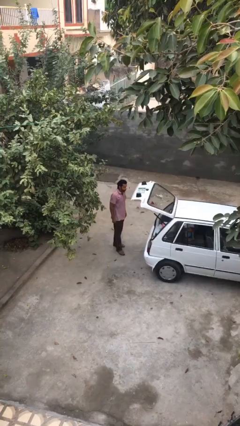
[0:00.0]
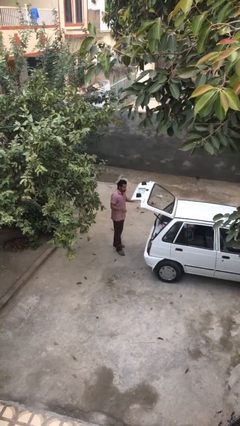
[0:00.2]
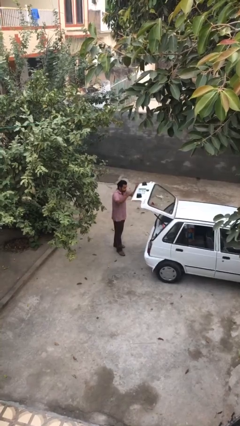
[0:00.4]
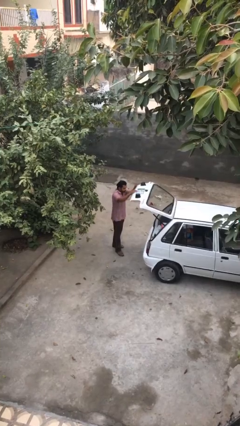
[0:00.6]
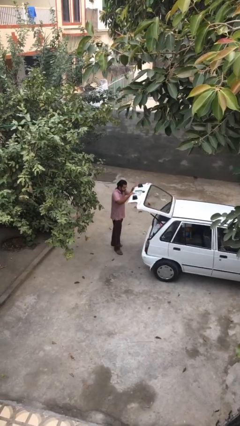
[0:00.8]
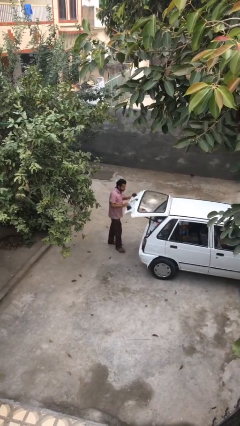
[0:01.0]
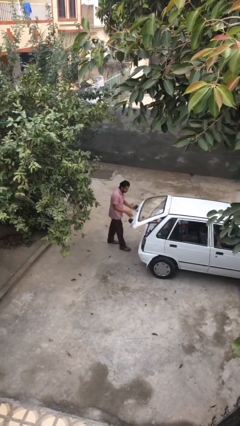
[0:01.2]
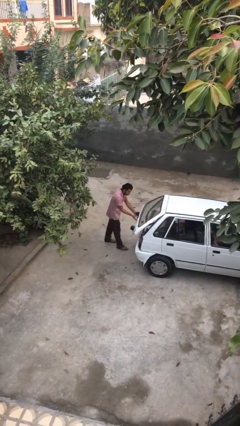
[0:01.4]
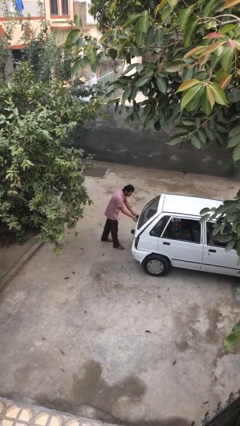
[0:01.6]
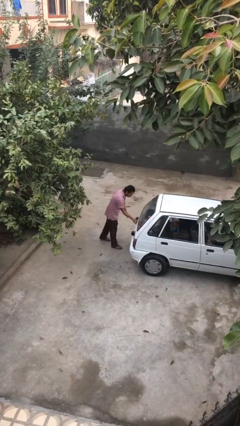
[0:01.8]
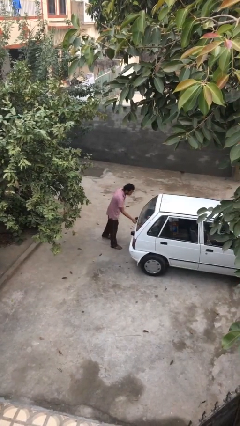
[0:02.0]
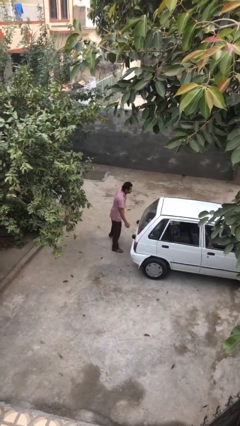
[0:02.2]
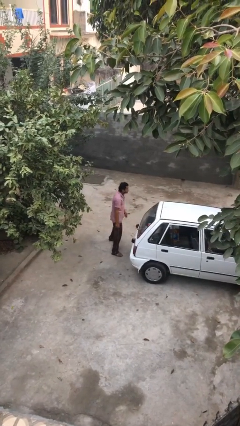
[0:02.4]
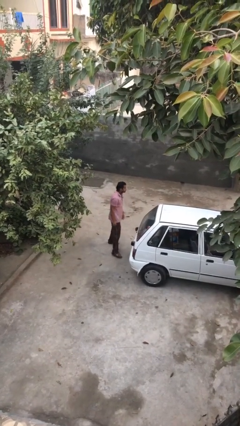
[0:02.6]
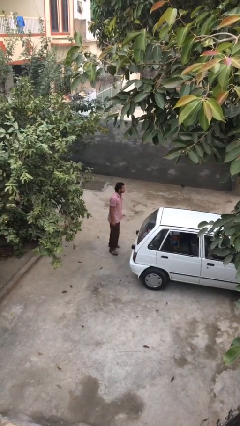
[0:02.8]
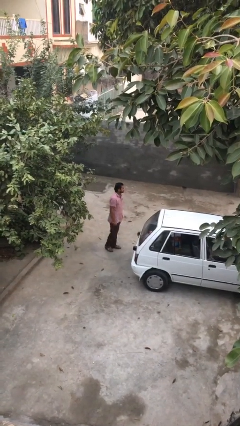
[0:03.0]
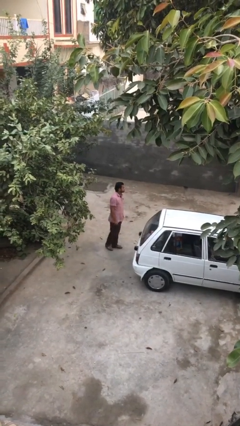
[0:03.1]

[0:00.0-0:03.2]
person closes car trunk

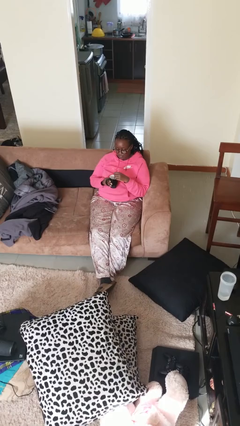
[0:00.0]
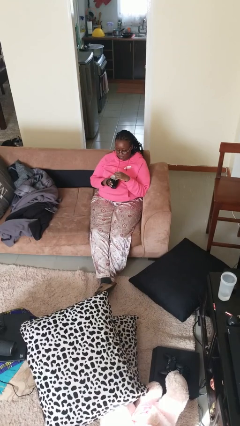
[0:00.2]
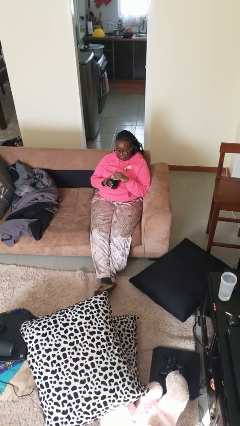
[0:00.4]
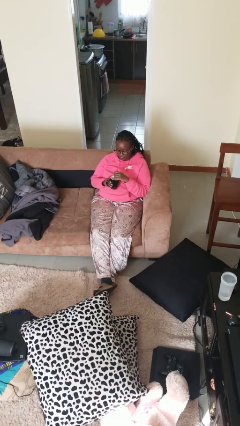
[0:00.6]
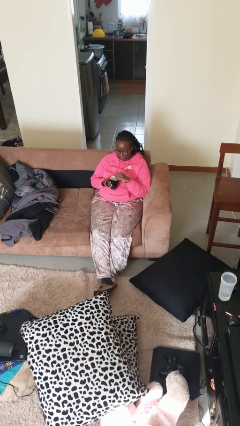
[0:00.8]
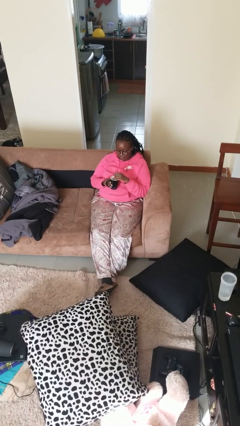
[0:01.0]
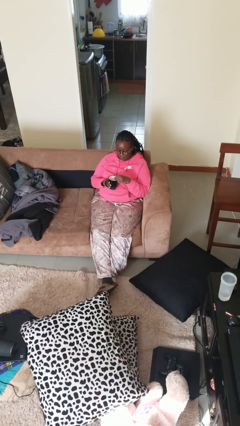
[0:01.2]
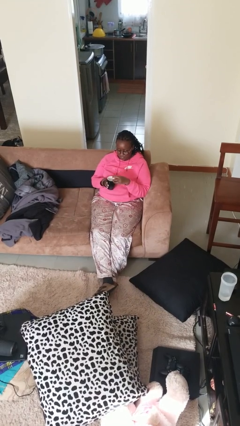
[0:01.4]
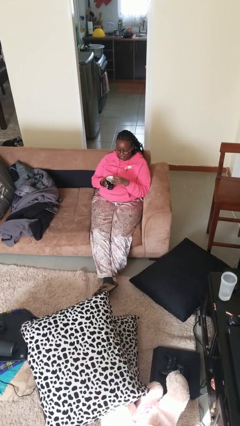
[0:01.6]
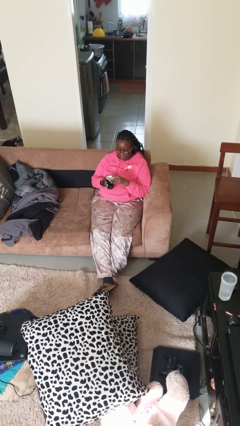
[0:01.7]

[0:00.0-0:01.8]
person stirs mug

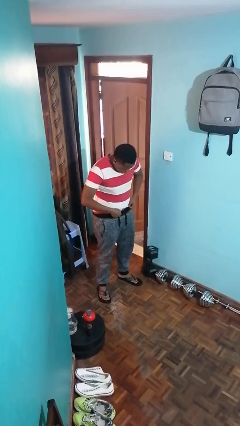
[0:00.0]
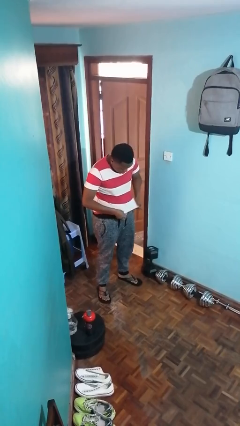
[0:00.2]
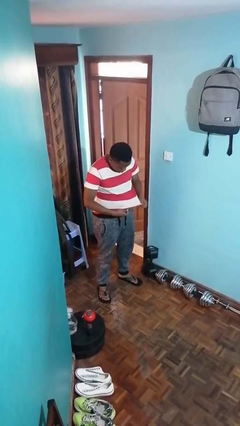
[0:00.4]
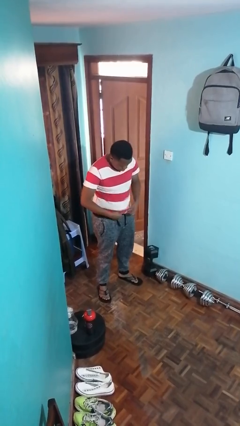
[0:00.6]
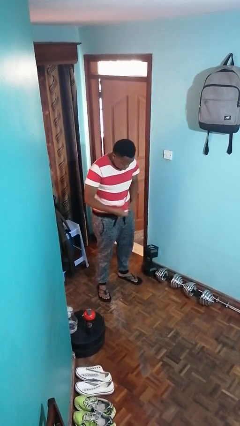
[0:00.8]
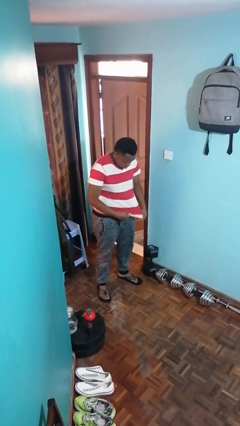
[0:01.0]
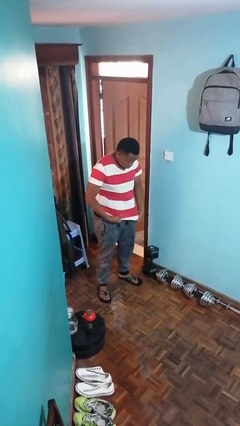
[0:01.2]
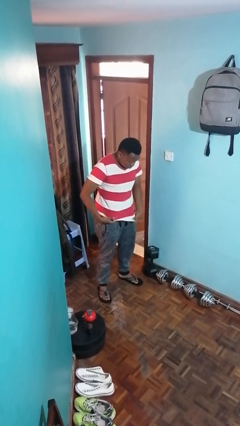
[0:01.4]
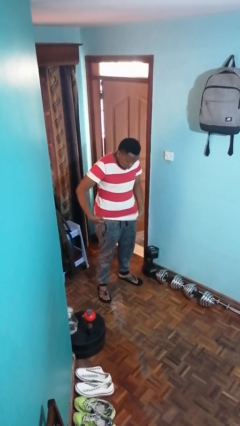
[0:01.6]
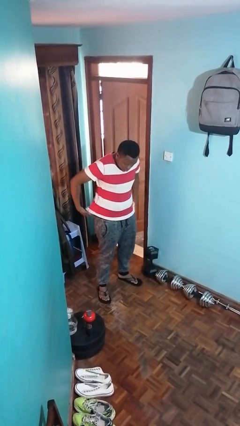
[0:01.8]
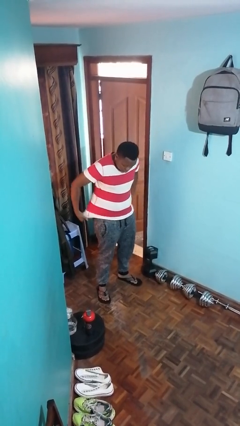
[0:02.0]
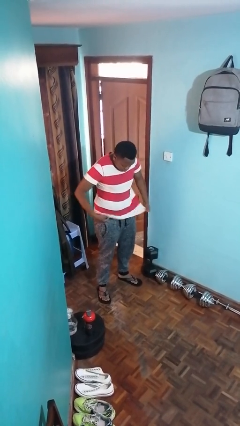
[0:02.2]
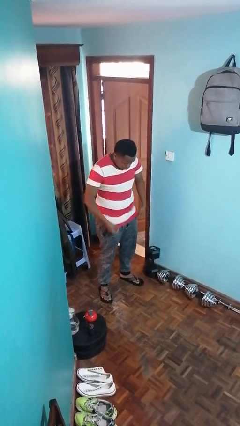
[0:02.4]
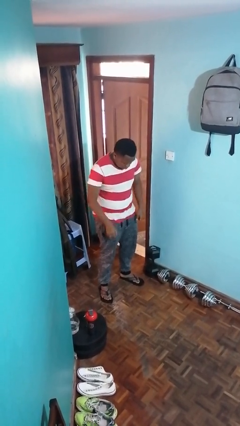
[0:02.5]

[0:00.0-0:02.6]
person untucks shirt

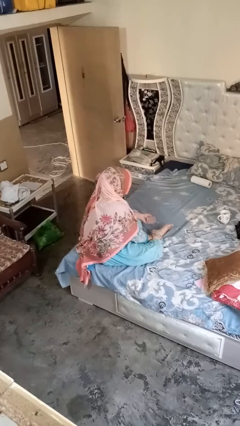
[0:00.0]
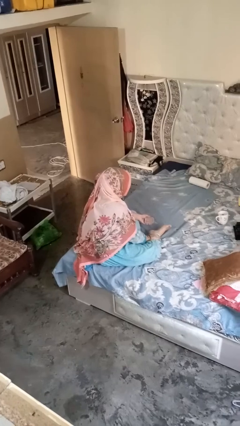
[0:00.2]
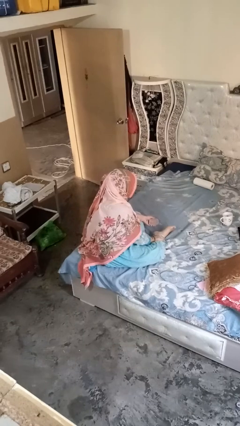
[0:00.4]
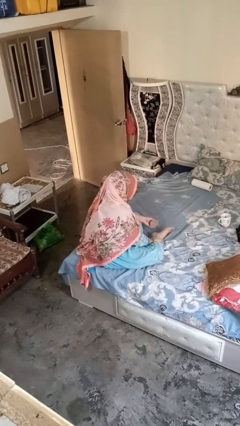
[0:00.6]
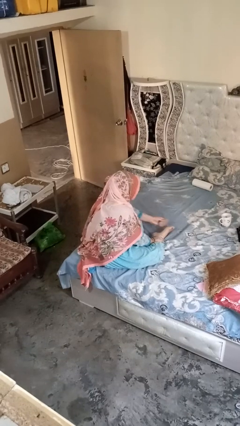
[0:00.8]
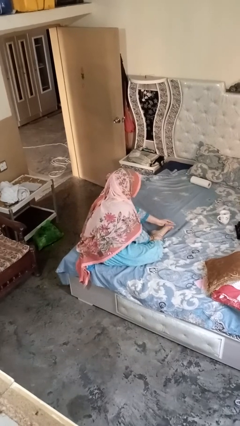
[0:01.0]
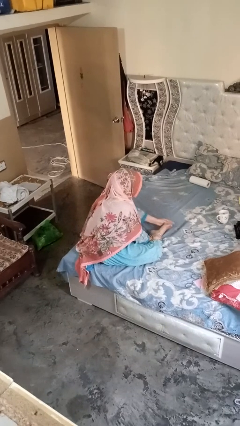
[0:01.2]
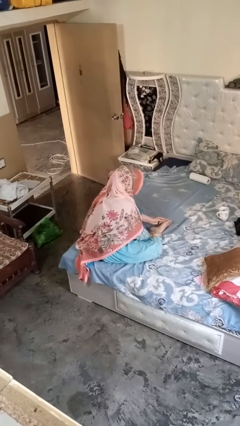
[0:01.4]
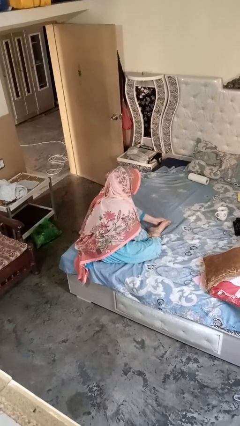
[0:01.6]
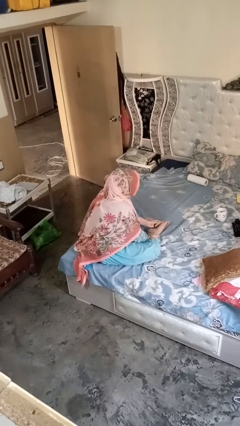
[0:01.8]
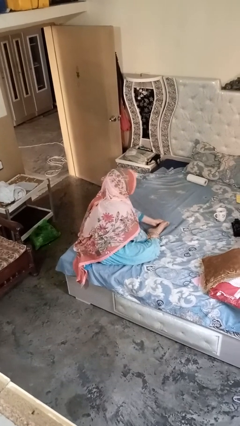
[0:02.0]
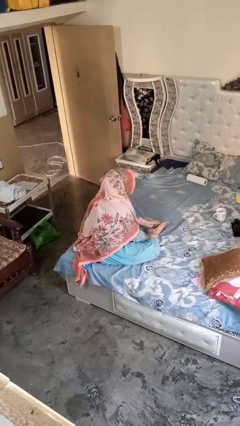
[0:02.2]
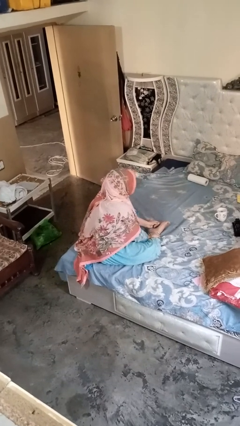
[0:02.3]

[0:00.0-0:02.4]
person rubs foot

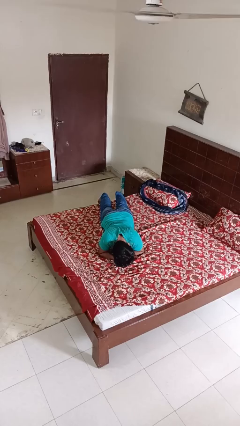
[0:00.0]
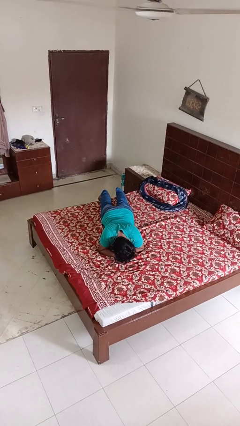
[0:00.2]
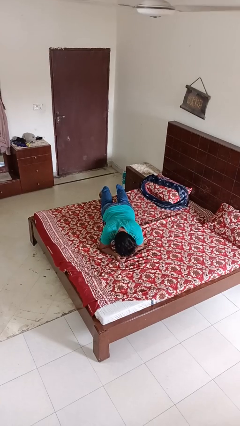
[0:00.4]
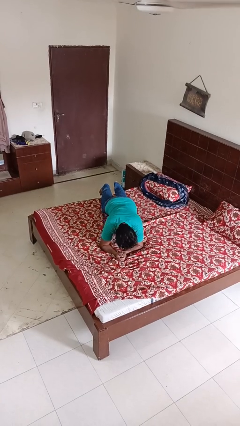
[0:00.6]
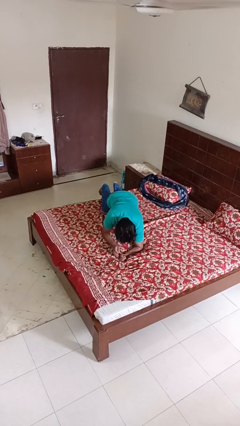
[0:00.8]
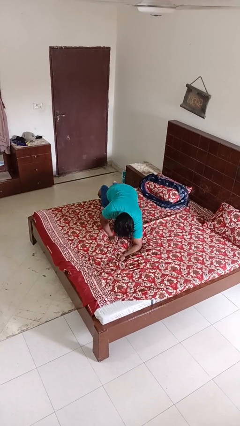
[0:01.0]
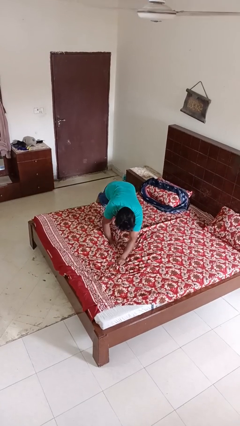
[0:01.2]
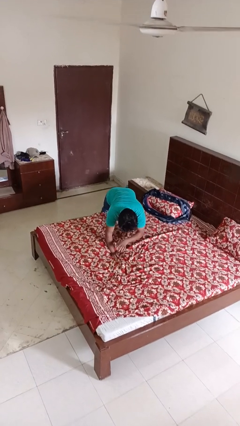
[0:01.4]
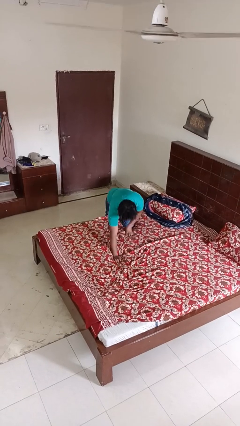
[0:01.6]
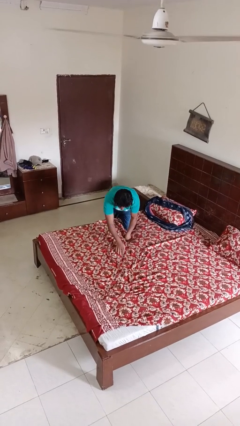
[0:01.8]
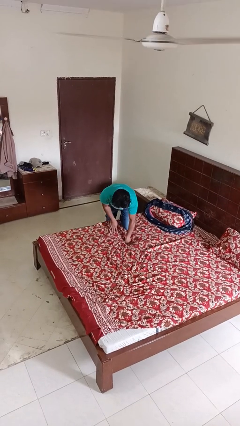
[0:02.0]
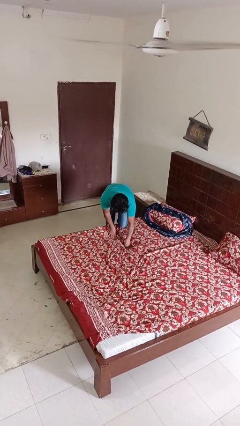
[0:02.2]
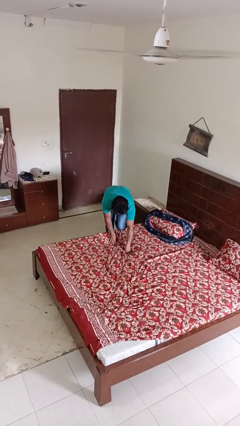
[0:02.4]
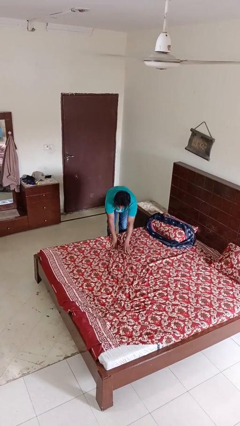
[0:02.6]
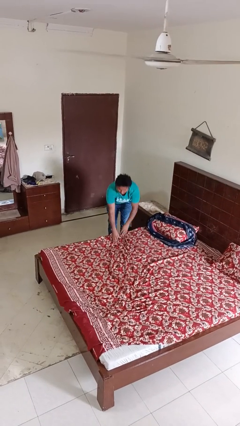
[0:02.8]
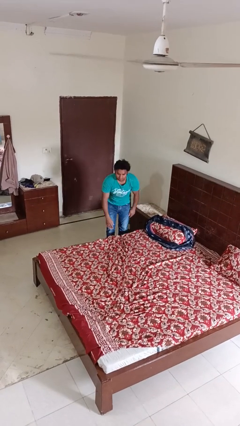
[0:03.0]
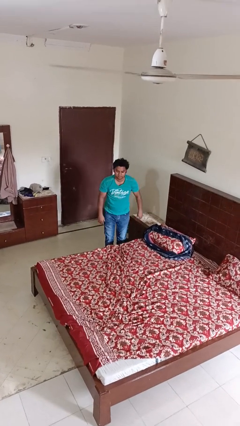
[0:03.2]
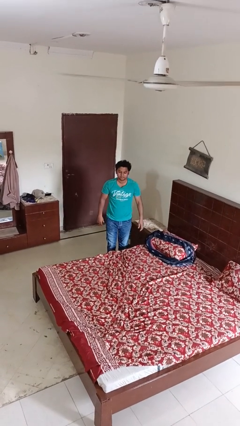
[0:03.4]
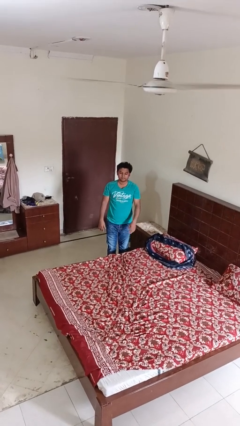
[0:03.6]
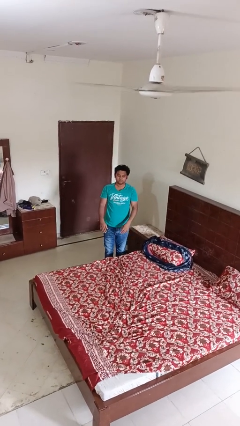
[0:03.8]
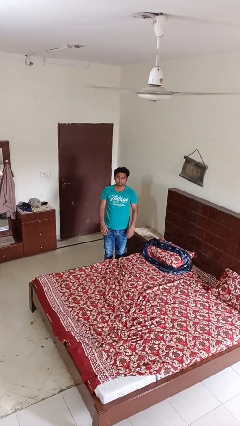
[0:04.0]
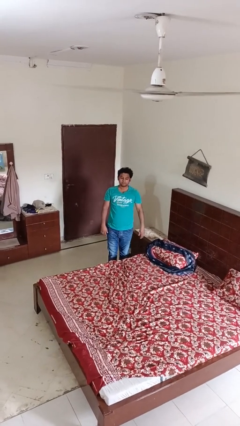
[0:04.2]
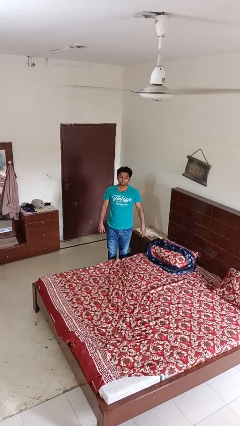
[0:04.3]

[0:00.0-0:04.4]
person stands up

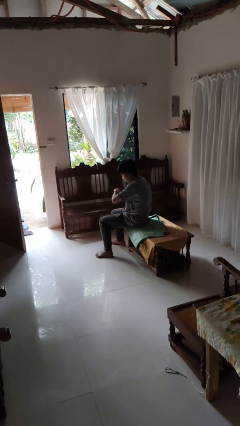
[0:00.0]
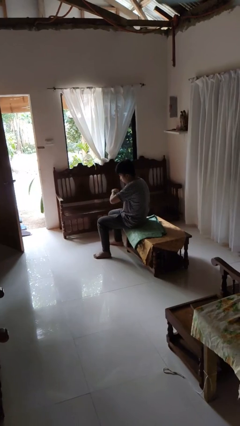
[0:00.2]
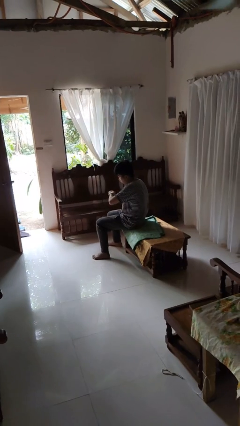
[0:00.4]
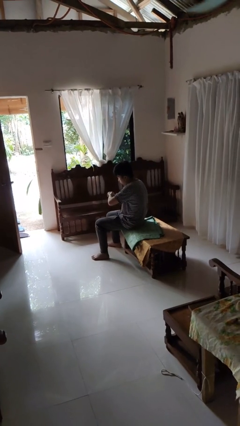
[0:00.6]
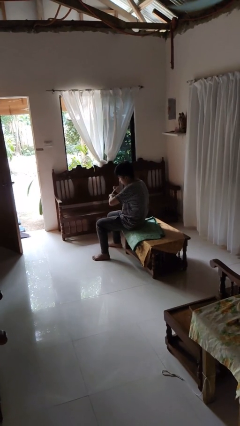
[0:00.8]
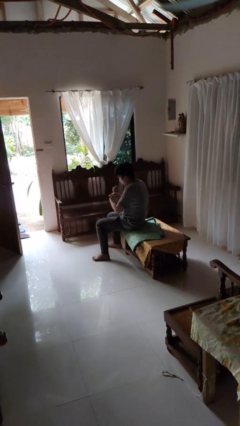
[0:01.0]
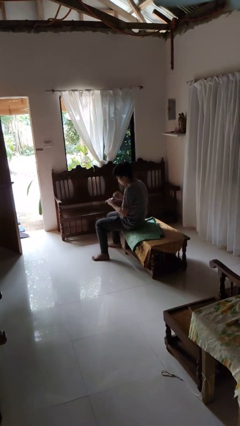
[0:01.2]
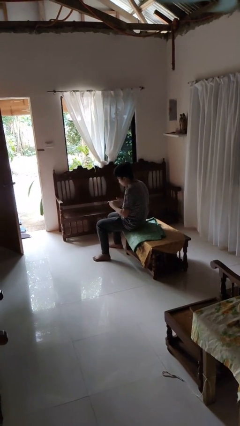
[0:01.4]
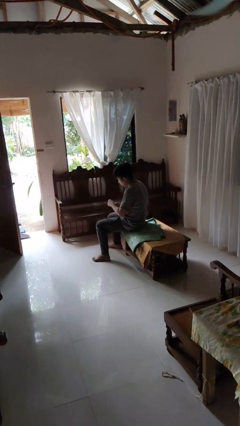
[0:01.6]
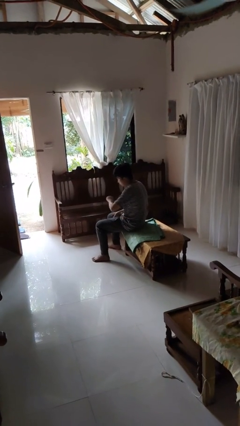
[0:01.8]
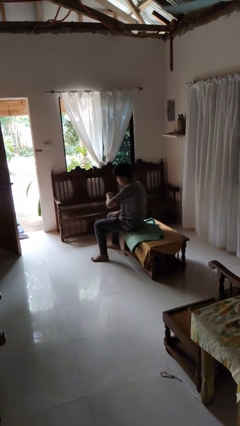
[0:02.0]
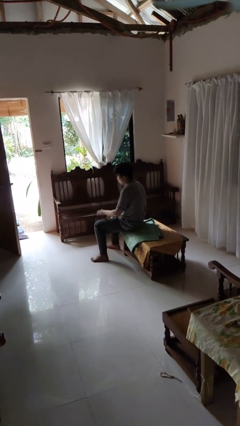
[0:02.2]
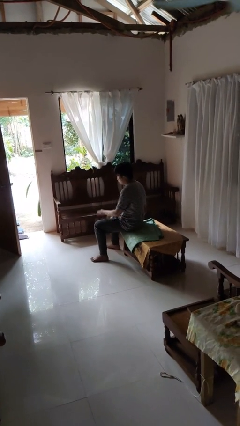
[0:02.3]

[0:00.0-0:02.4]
person takes off wristwatch

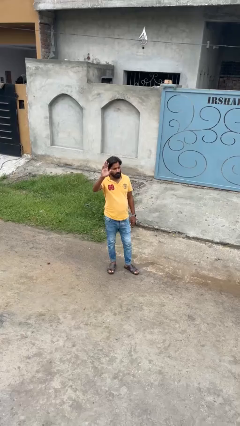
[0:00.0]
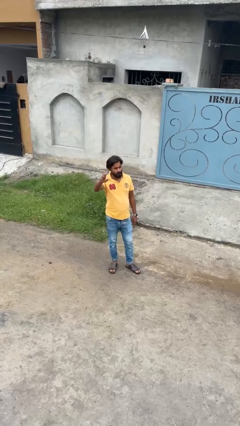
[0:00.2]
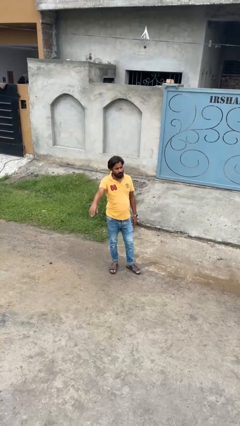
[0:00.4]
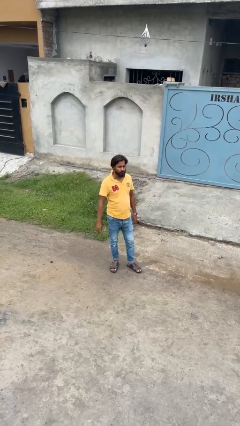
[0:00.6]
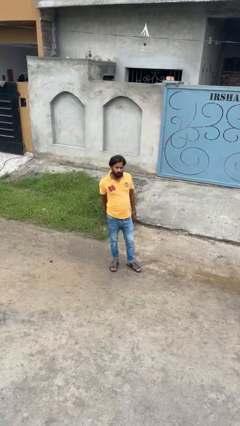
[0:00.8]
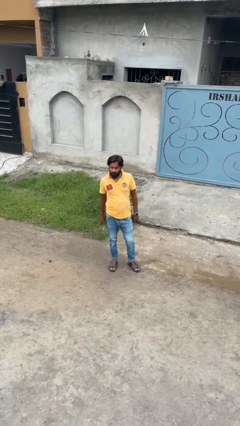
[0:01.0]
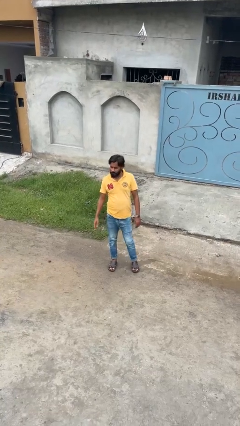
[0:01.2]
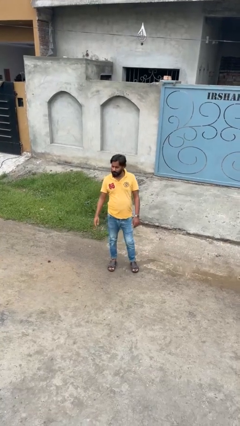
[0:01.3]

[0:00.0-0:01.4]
person gestures lower hand
